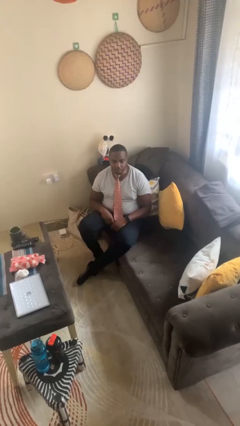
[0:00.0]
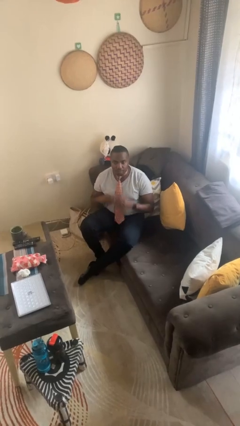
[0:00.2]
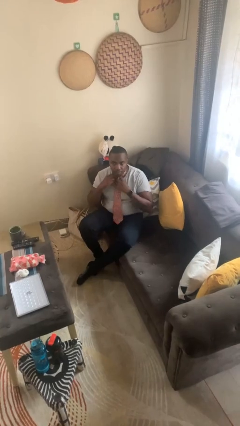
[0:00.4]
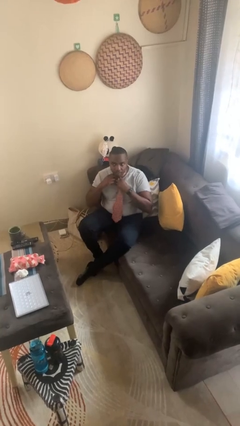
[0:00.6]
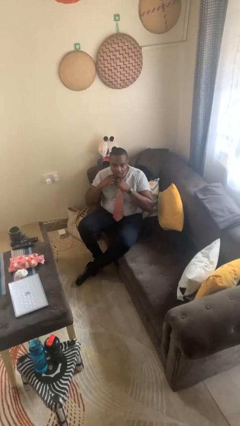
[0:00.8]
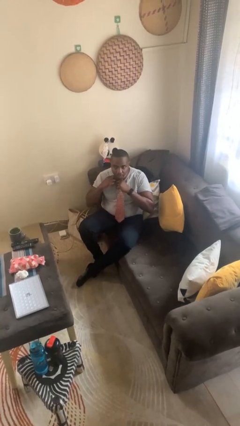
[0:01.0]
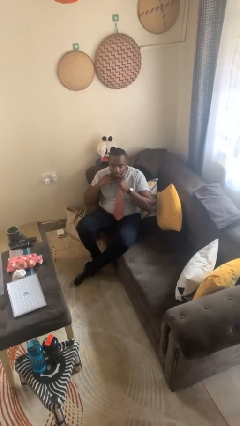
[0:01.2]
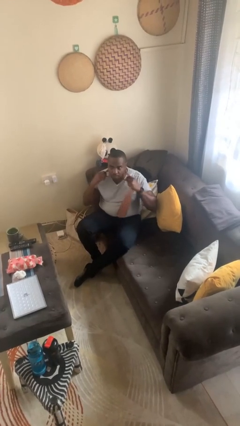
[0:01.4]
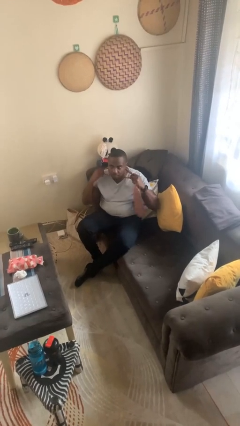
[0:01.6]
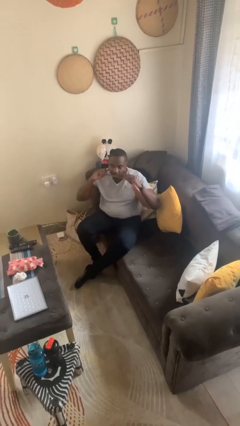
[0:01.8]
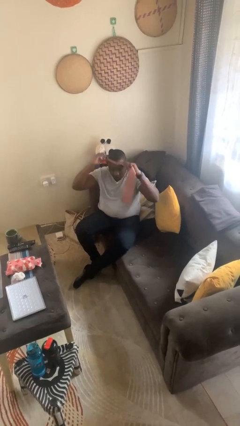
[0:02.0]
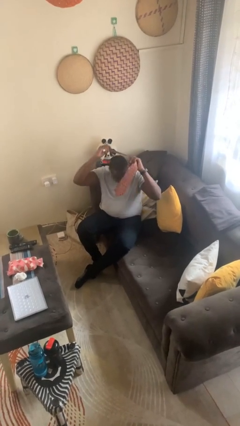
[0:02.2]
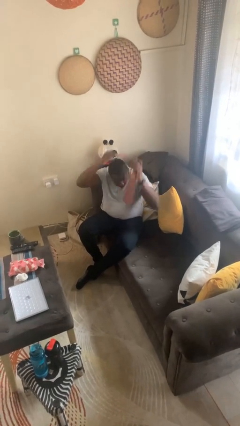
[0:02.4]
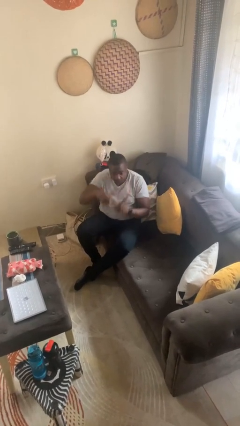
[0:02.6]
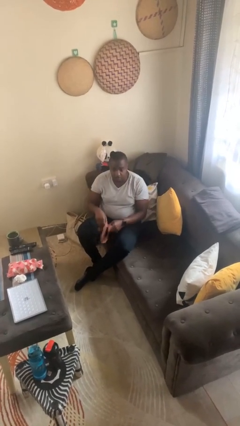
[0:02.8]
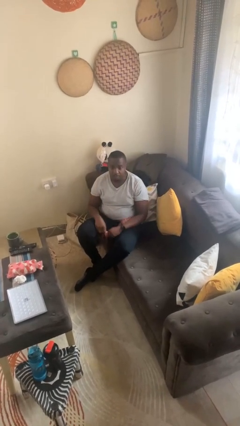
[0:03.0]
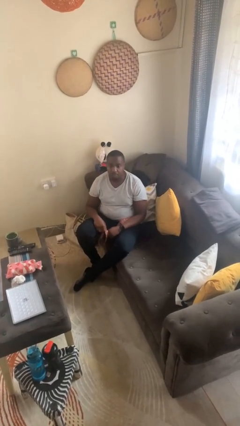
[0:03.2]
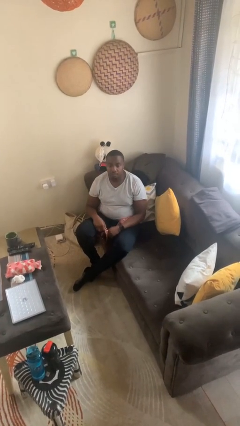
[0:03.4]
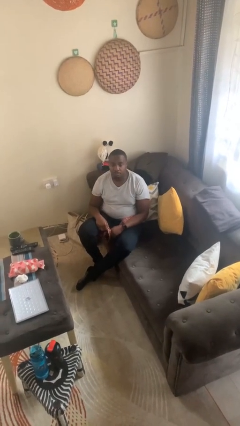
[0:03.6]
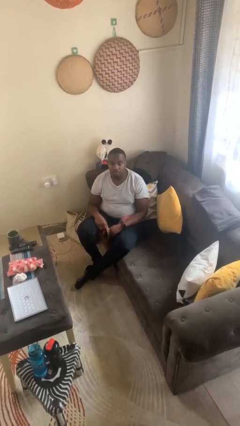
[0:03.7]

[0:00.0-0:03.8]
person takes off necktie

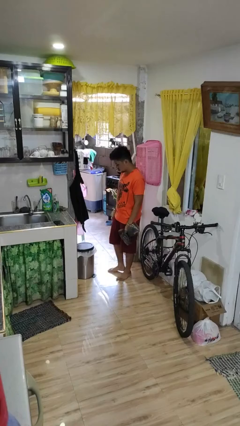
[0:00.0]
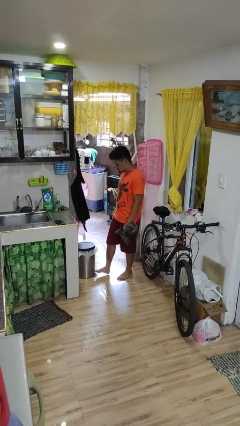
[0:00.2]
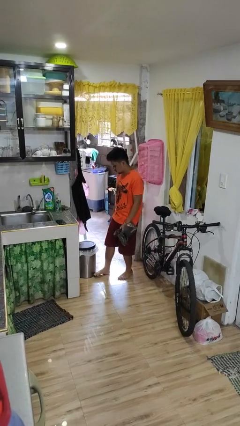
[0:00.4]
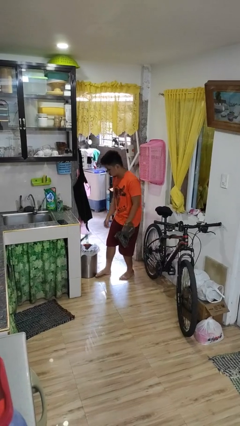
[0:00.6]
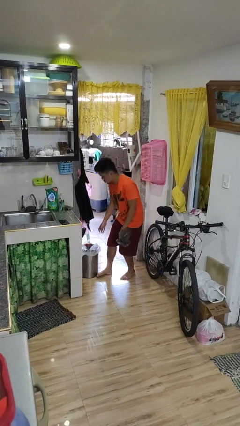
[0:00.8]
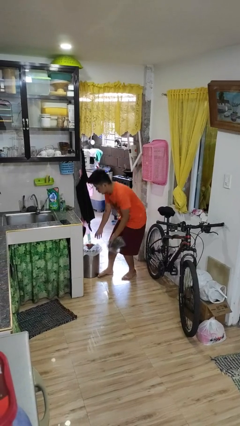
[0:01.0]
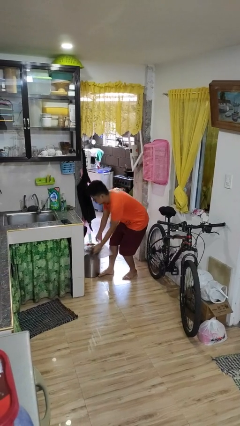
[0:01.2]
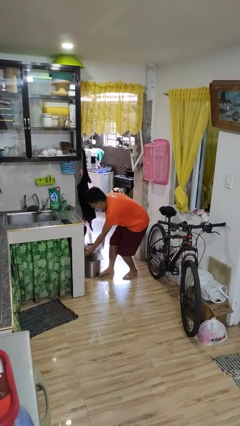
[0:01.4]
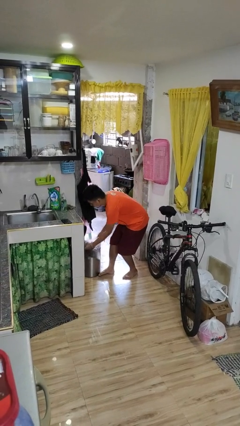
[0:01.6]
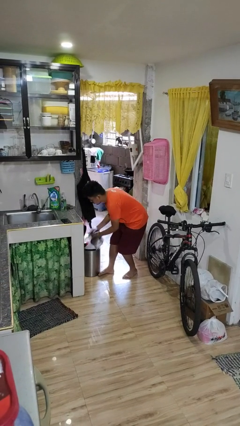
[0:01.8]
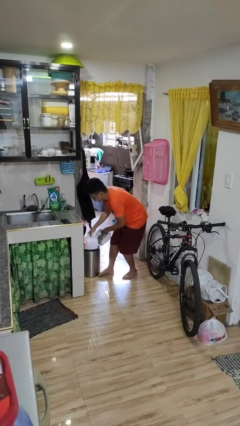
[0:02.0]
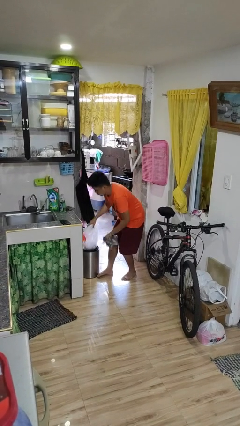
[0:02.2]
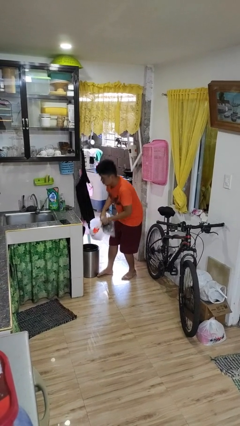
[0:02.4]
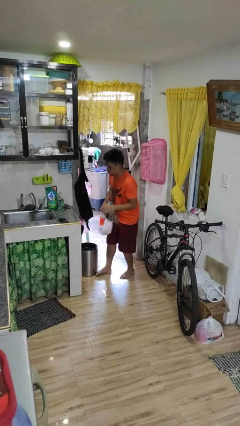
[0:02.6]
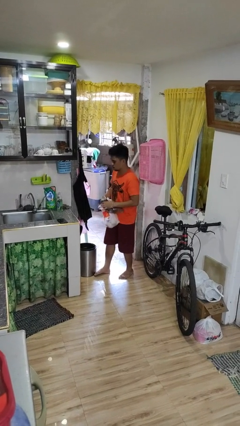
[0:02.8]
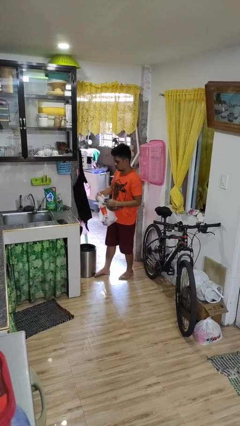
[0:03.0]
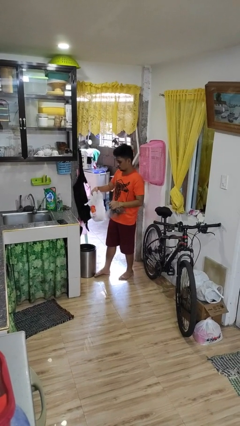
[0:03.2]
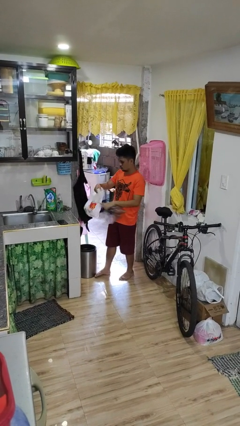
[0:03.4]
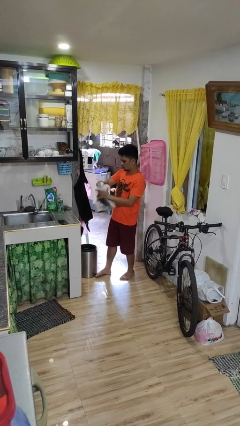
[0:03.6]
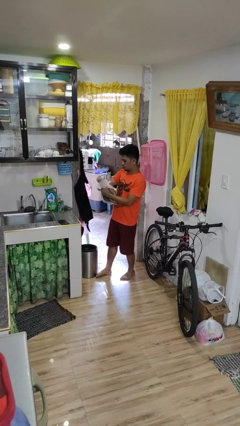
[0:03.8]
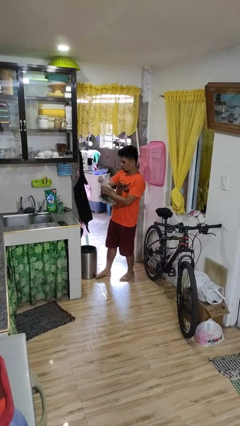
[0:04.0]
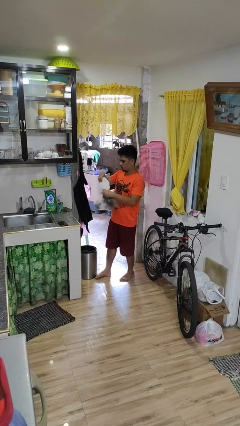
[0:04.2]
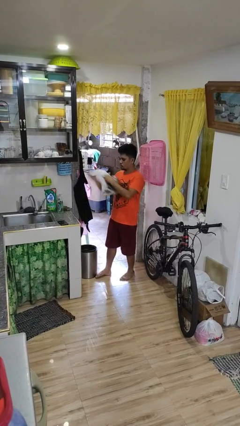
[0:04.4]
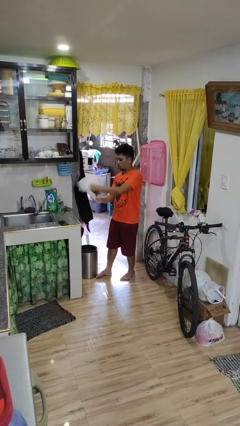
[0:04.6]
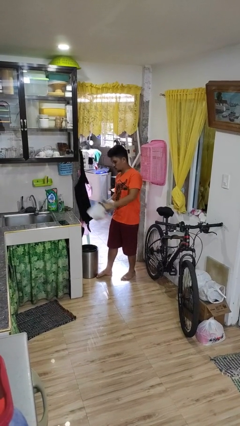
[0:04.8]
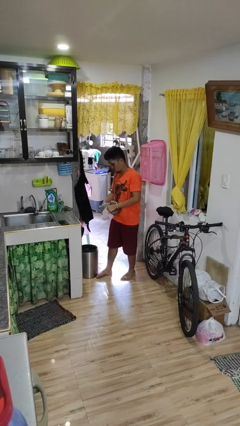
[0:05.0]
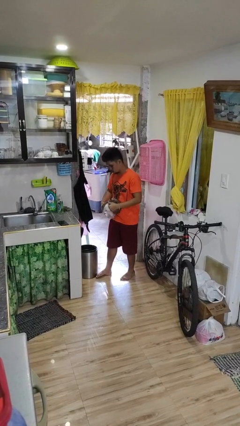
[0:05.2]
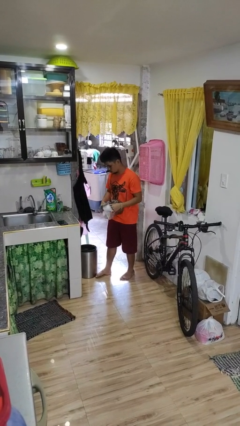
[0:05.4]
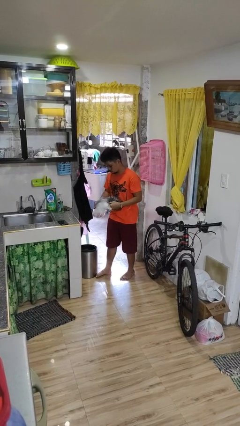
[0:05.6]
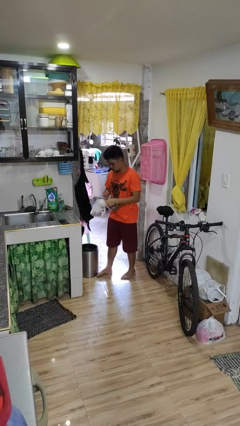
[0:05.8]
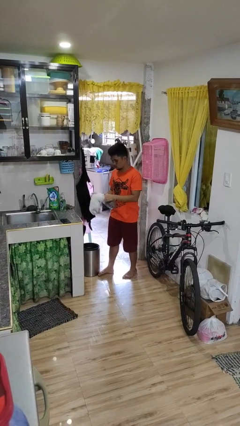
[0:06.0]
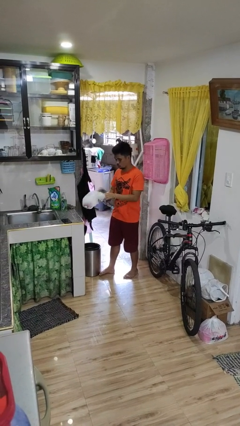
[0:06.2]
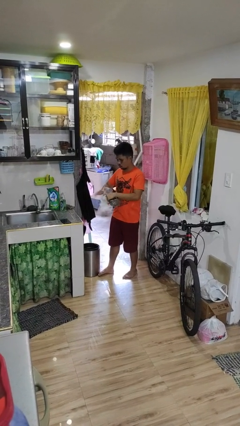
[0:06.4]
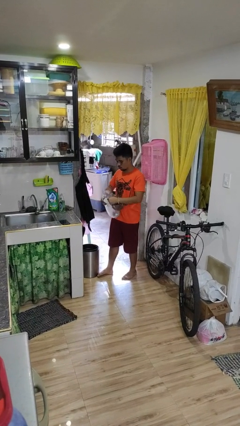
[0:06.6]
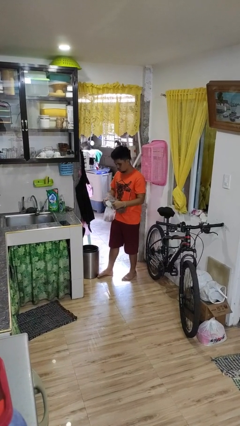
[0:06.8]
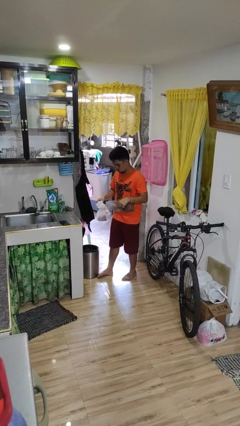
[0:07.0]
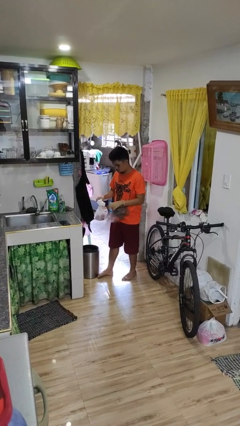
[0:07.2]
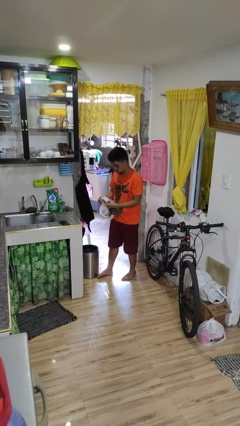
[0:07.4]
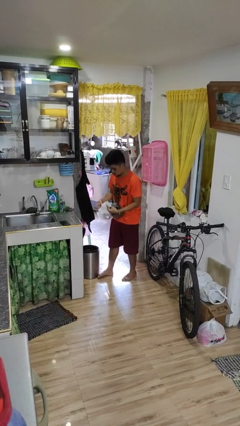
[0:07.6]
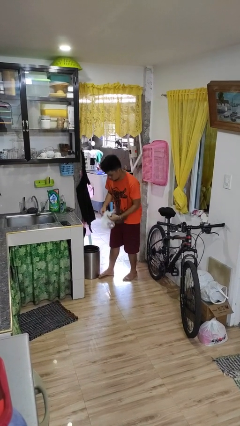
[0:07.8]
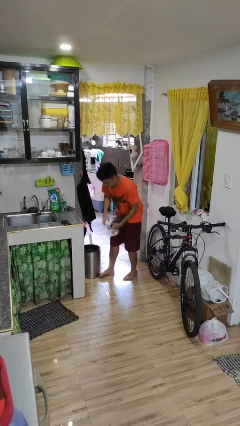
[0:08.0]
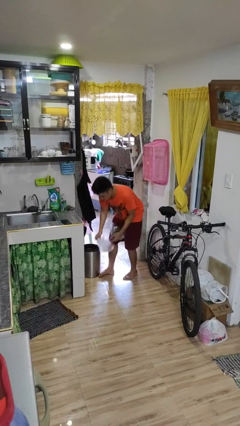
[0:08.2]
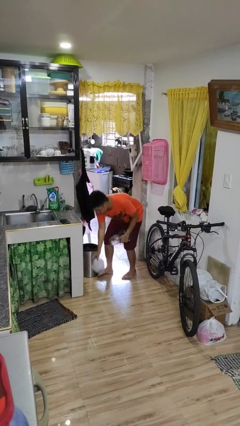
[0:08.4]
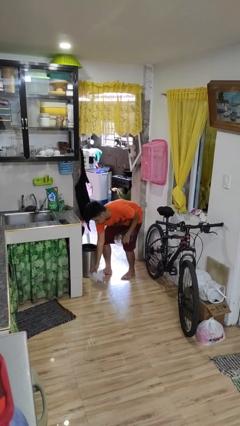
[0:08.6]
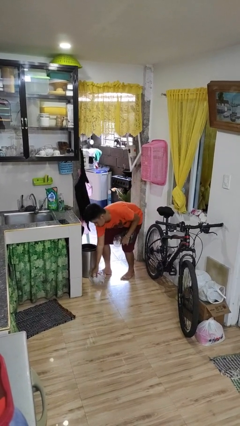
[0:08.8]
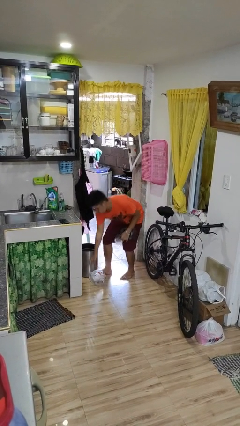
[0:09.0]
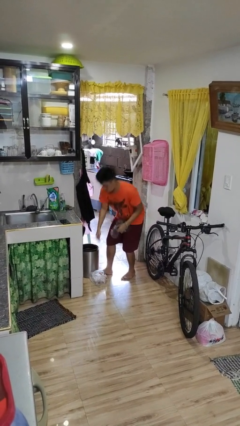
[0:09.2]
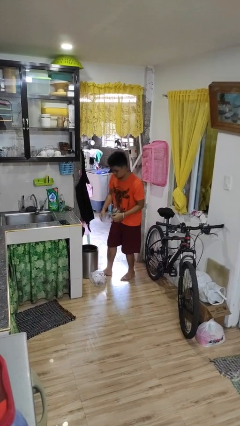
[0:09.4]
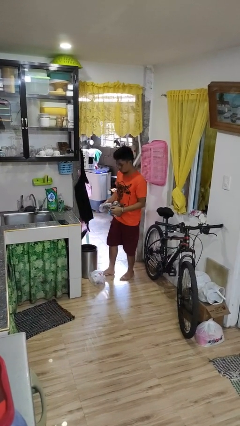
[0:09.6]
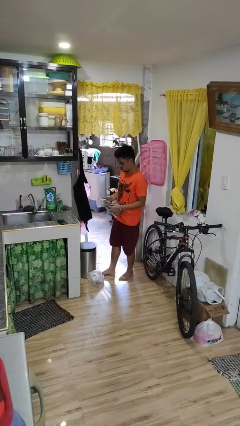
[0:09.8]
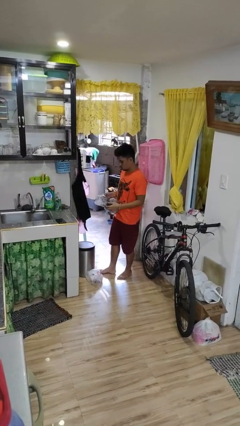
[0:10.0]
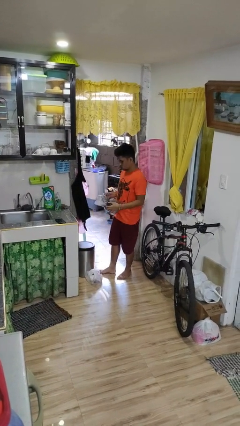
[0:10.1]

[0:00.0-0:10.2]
person removes trashbag from trashcan

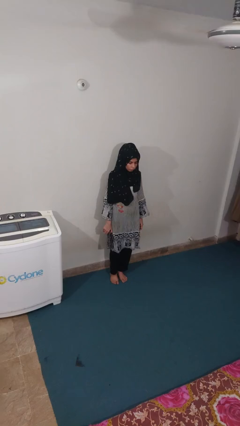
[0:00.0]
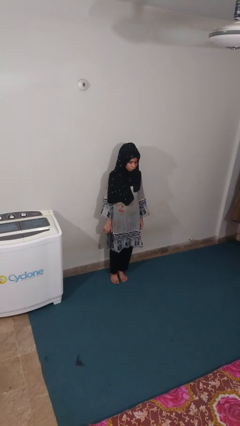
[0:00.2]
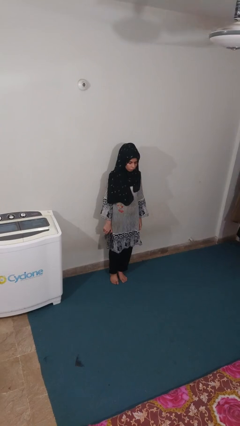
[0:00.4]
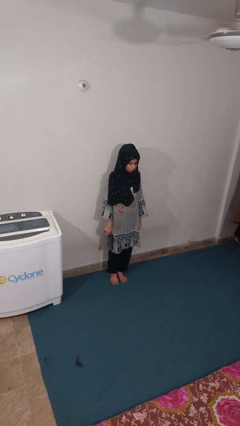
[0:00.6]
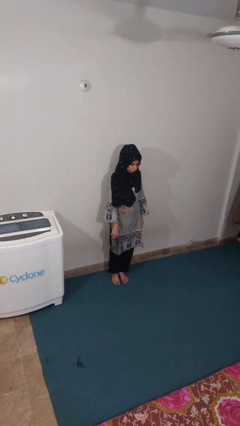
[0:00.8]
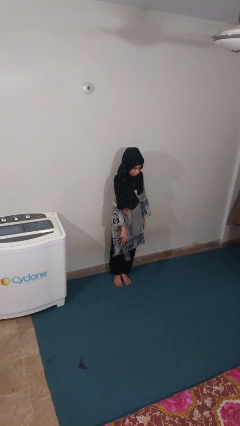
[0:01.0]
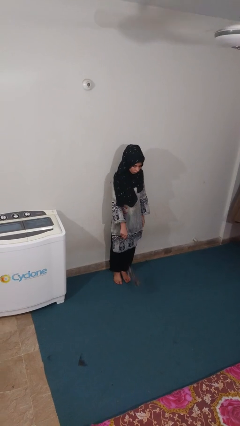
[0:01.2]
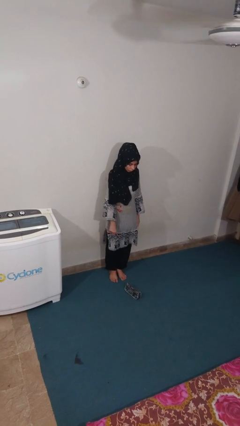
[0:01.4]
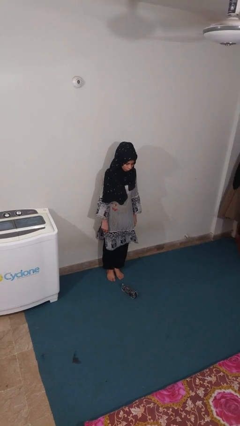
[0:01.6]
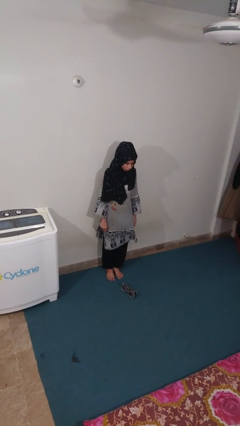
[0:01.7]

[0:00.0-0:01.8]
person throws object to ground

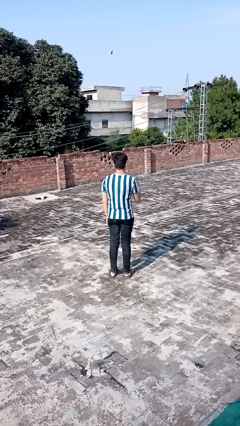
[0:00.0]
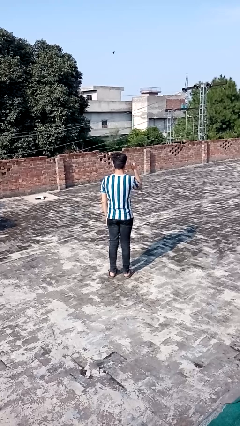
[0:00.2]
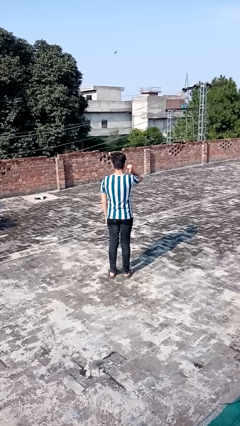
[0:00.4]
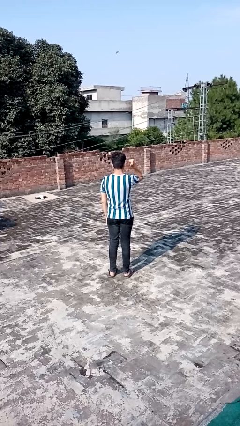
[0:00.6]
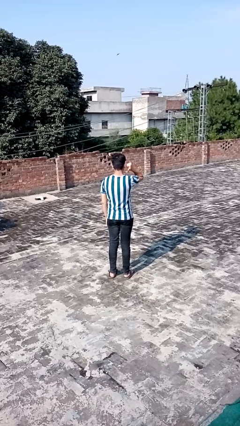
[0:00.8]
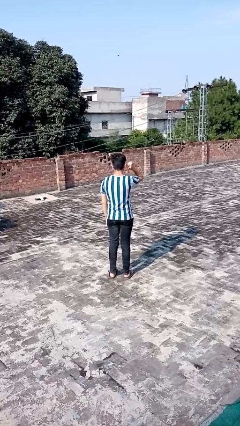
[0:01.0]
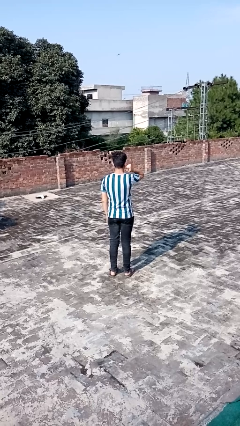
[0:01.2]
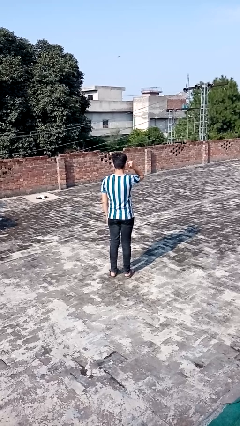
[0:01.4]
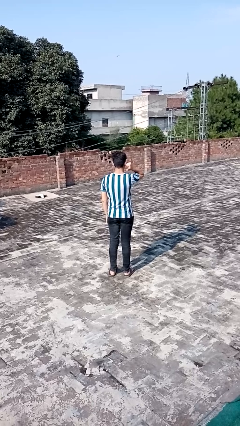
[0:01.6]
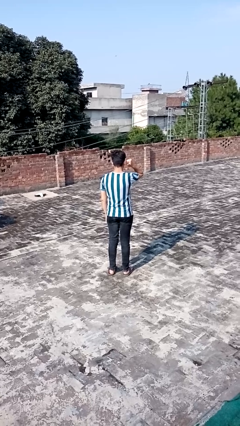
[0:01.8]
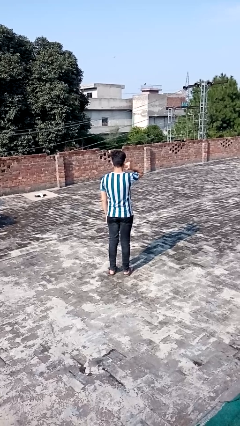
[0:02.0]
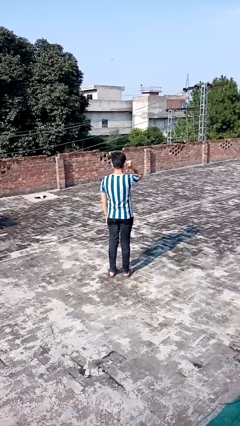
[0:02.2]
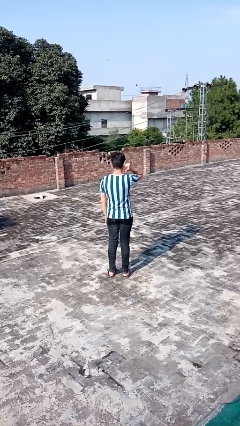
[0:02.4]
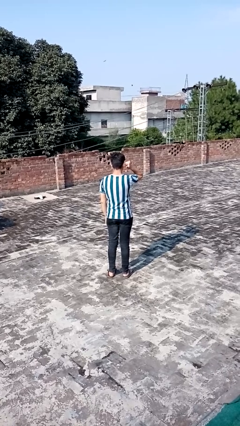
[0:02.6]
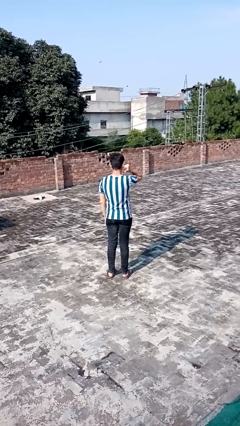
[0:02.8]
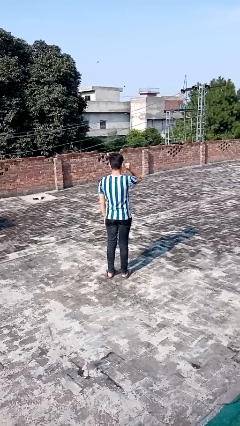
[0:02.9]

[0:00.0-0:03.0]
person gestures behind me
